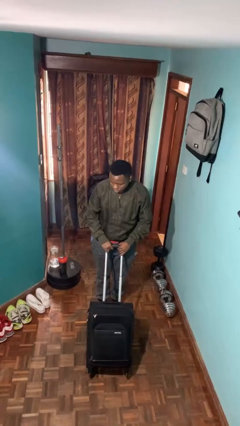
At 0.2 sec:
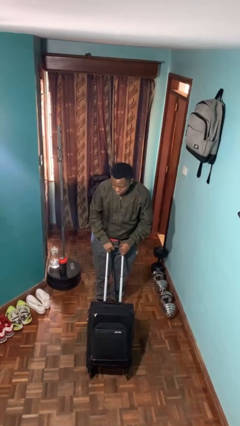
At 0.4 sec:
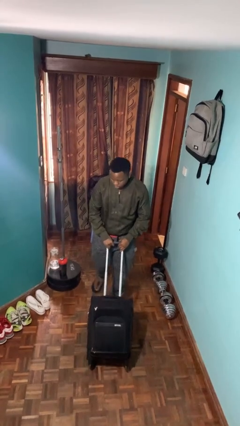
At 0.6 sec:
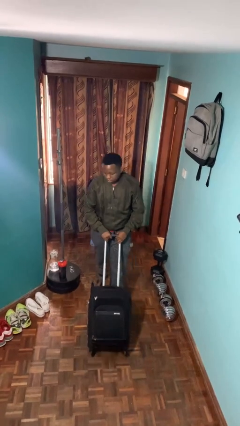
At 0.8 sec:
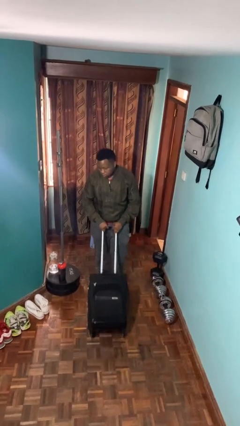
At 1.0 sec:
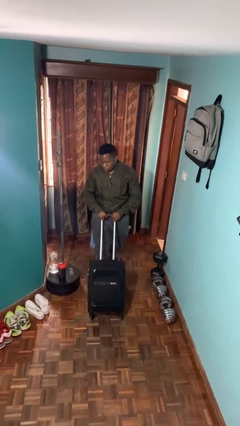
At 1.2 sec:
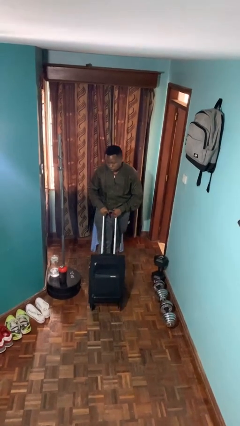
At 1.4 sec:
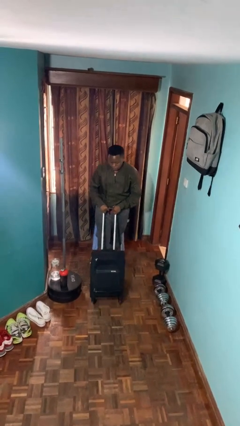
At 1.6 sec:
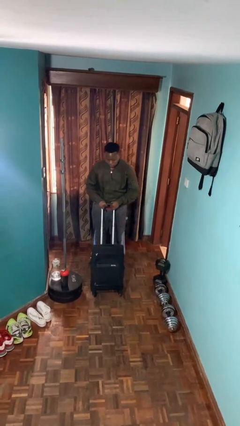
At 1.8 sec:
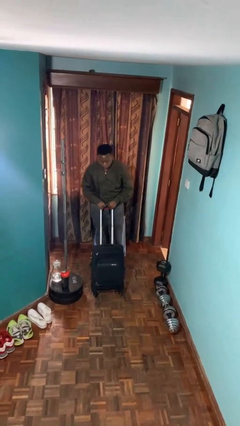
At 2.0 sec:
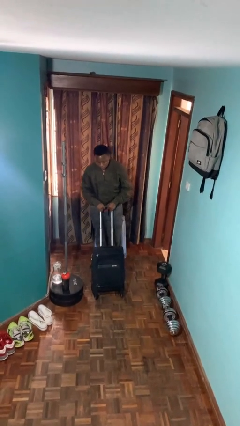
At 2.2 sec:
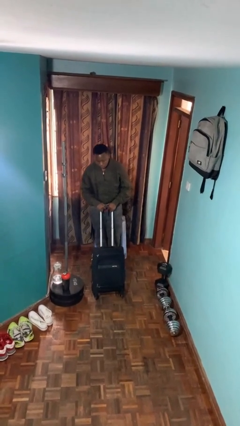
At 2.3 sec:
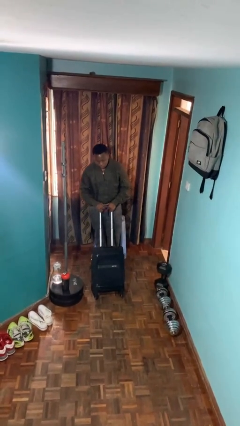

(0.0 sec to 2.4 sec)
person pulls wheeled cart

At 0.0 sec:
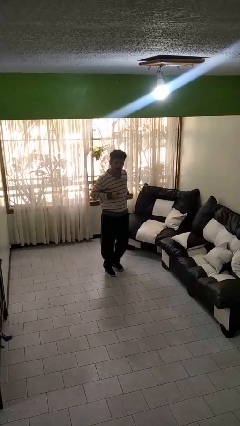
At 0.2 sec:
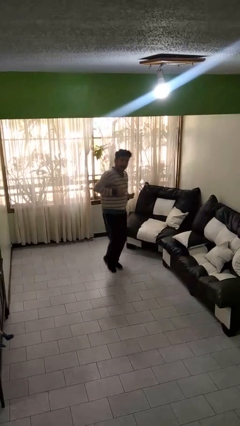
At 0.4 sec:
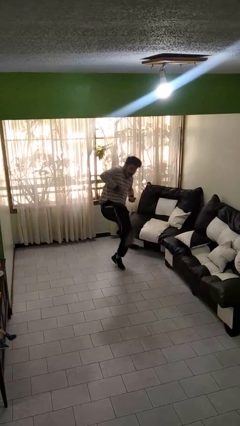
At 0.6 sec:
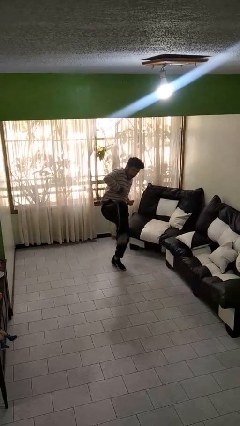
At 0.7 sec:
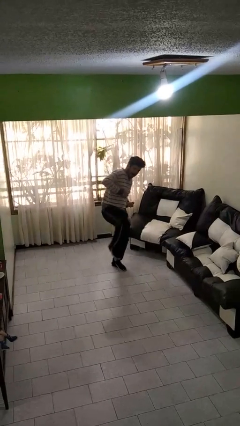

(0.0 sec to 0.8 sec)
person karate kicks

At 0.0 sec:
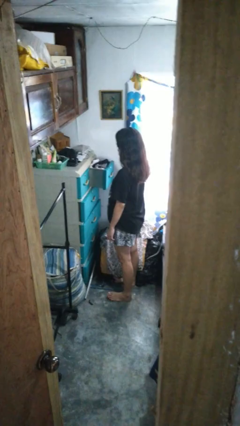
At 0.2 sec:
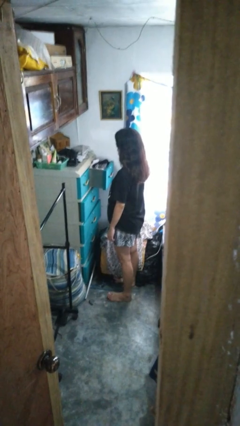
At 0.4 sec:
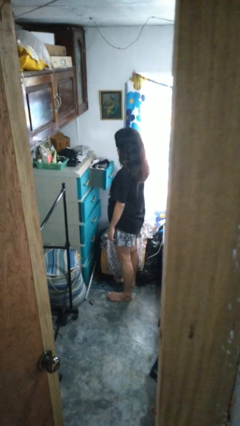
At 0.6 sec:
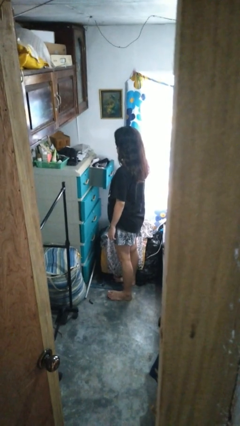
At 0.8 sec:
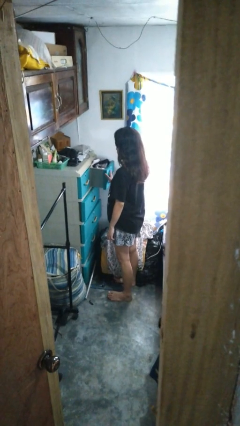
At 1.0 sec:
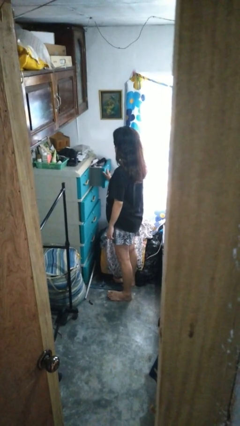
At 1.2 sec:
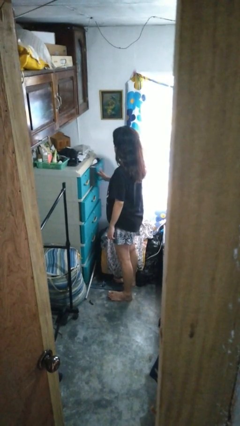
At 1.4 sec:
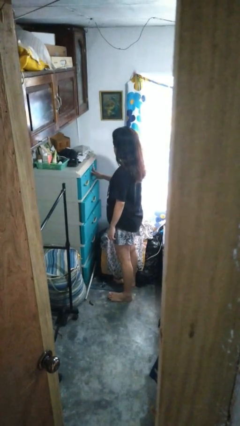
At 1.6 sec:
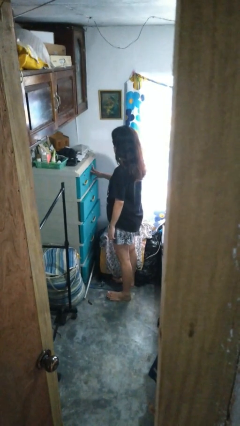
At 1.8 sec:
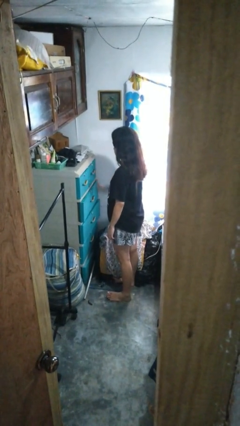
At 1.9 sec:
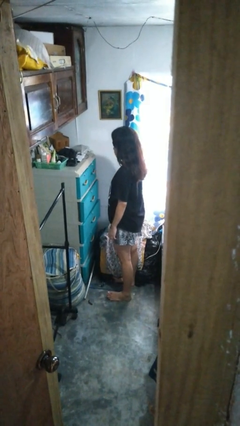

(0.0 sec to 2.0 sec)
person closes dresser drawer

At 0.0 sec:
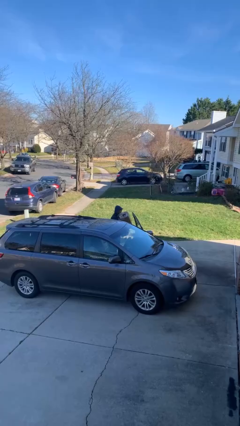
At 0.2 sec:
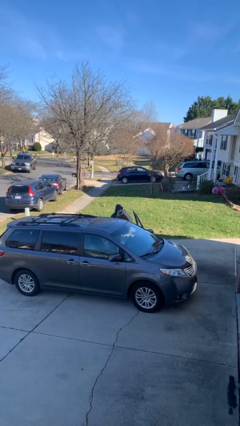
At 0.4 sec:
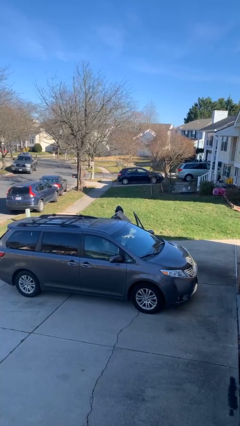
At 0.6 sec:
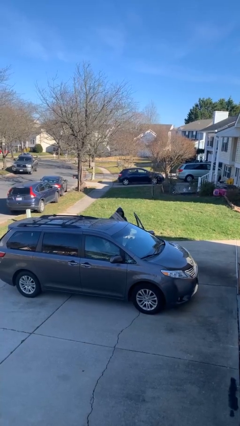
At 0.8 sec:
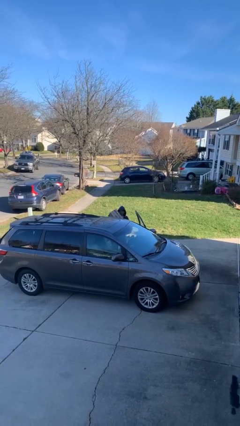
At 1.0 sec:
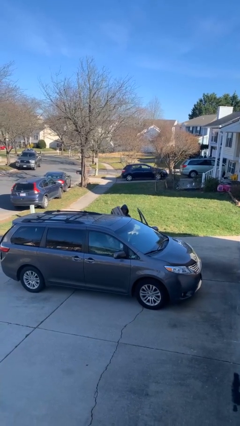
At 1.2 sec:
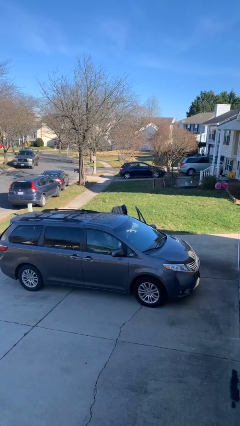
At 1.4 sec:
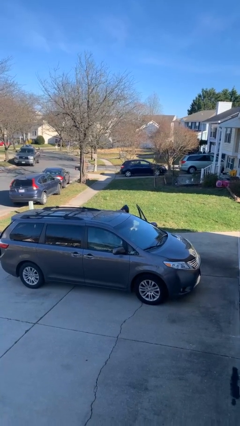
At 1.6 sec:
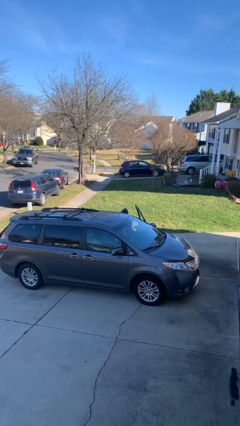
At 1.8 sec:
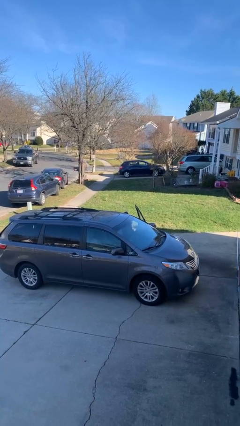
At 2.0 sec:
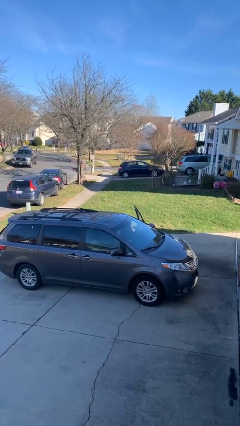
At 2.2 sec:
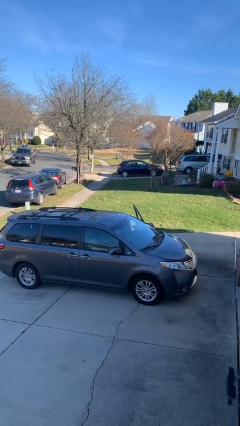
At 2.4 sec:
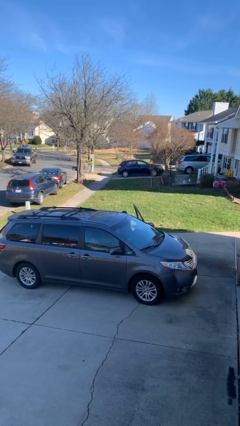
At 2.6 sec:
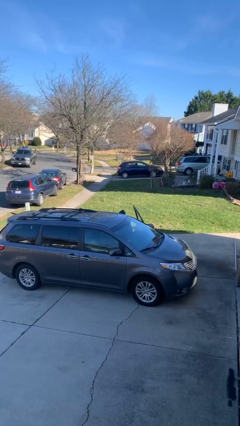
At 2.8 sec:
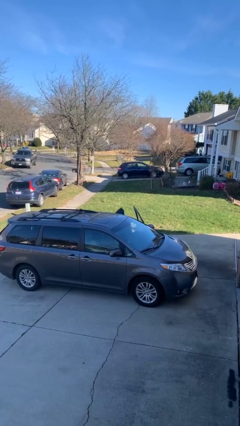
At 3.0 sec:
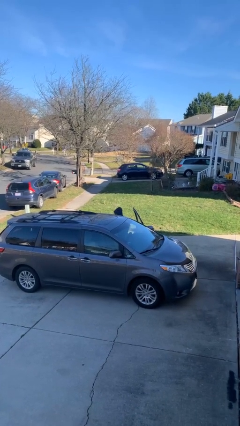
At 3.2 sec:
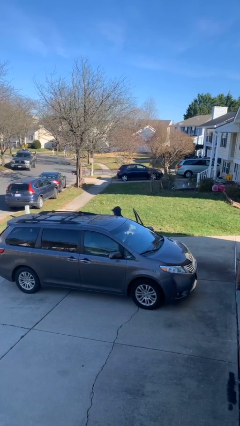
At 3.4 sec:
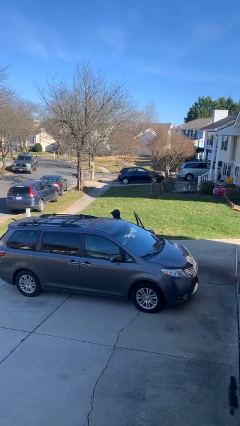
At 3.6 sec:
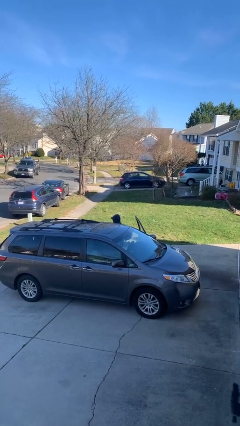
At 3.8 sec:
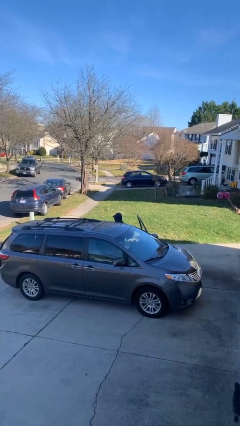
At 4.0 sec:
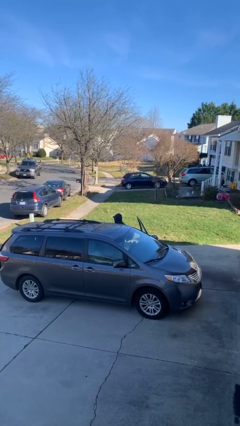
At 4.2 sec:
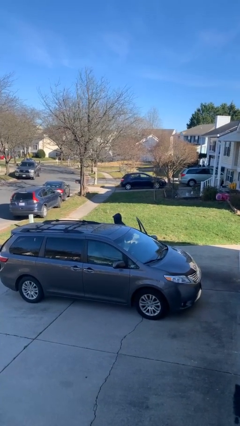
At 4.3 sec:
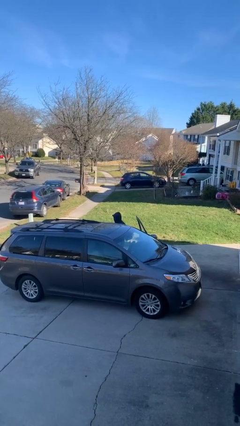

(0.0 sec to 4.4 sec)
person loads car

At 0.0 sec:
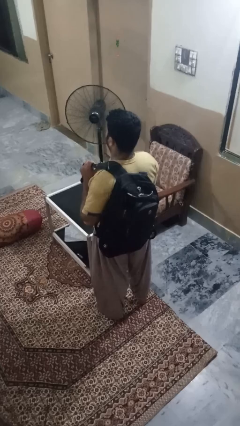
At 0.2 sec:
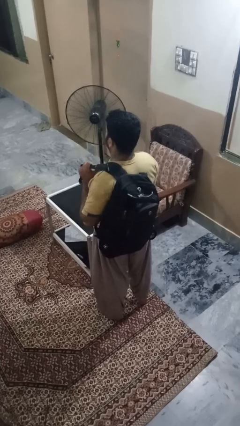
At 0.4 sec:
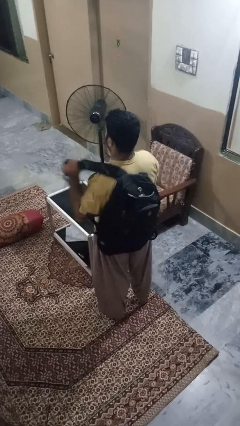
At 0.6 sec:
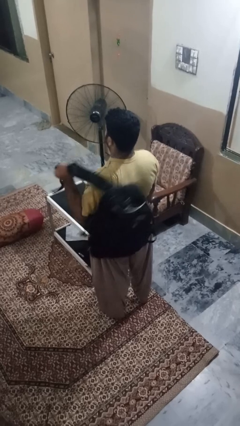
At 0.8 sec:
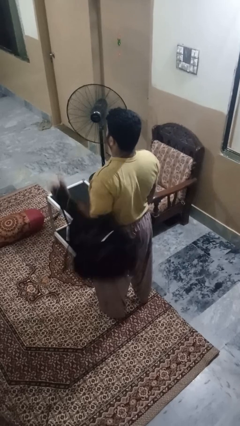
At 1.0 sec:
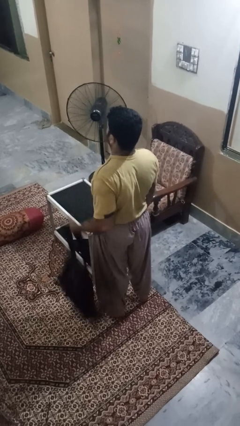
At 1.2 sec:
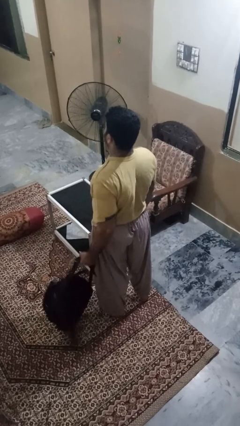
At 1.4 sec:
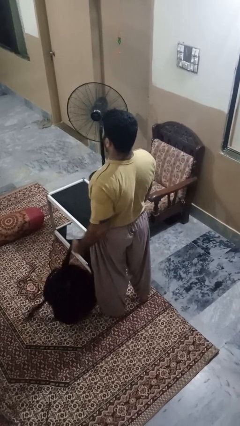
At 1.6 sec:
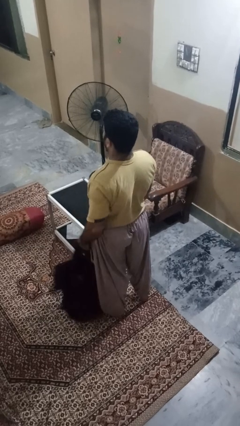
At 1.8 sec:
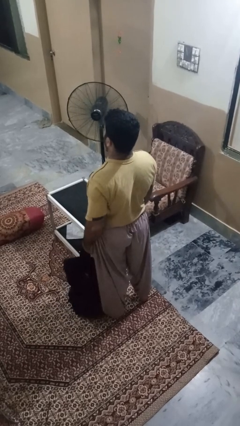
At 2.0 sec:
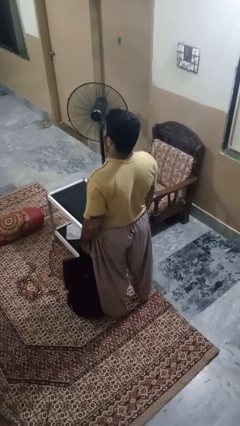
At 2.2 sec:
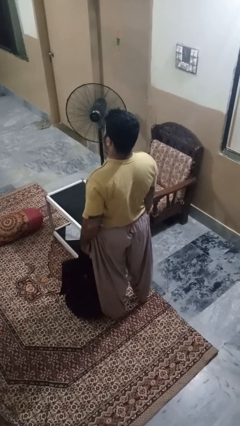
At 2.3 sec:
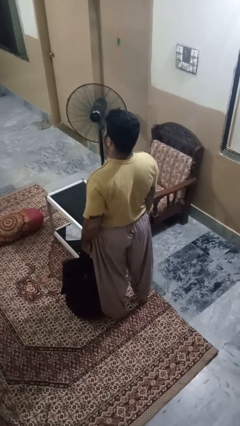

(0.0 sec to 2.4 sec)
person takes off backpack

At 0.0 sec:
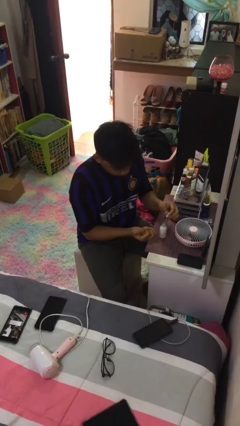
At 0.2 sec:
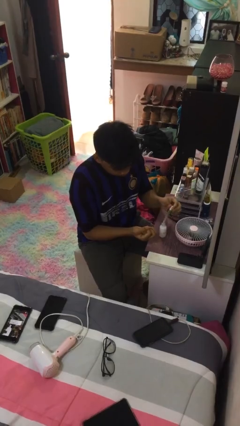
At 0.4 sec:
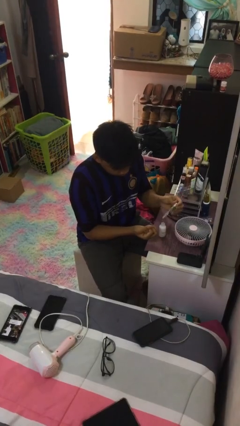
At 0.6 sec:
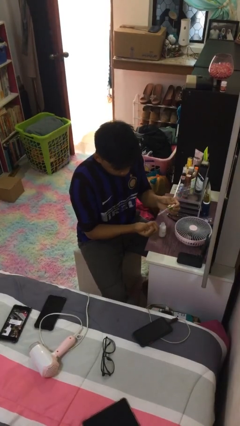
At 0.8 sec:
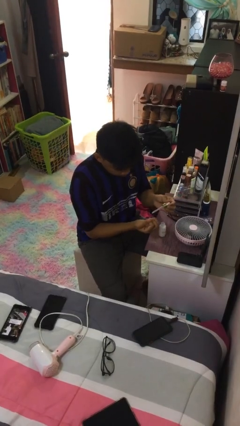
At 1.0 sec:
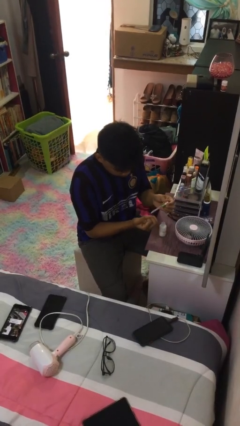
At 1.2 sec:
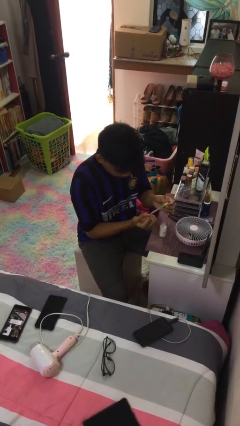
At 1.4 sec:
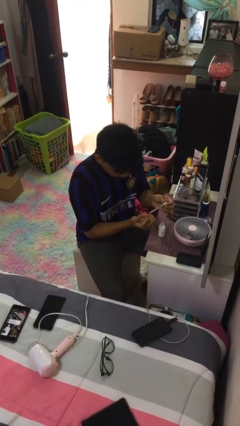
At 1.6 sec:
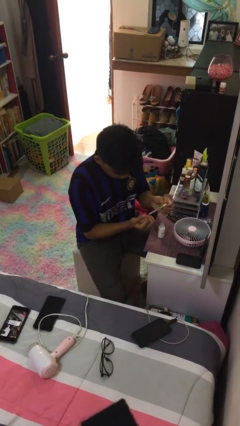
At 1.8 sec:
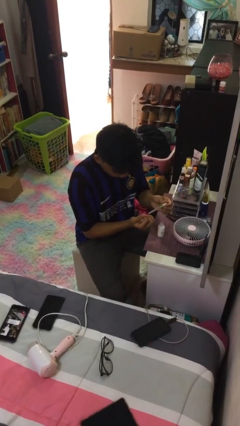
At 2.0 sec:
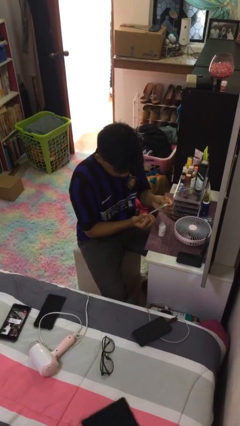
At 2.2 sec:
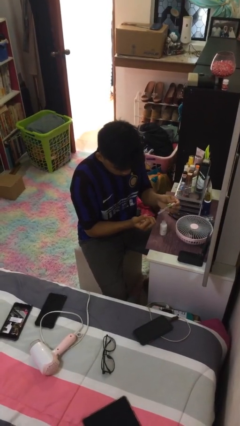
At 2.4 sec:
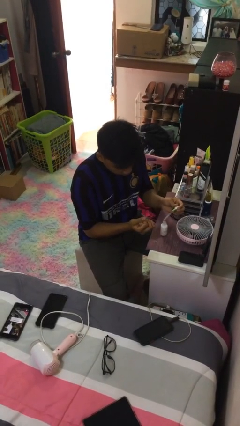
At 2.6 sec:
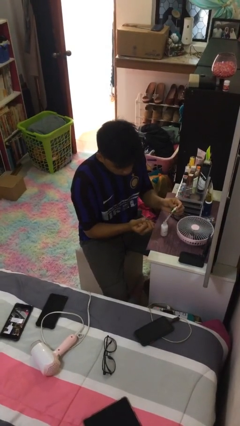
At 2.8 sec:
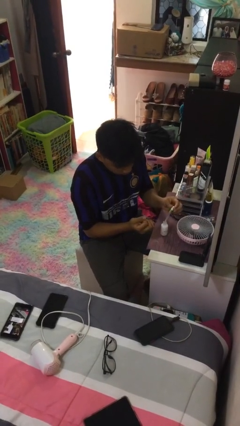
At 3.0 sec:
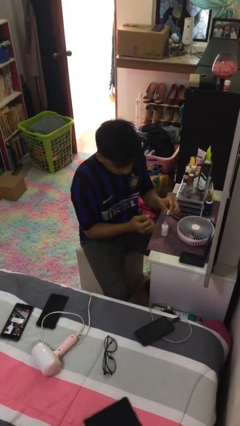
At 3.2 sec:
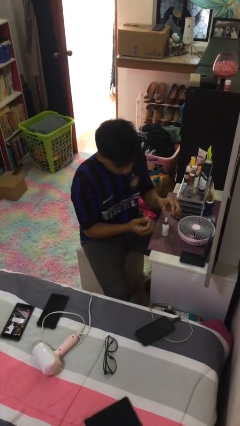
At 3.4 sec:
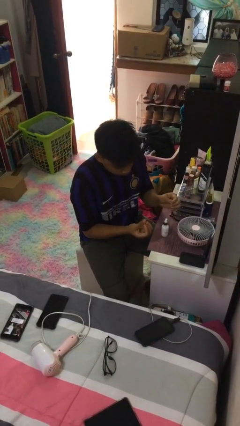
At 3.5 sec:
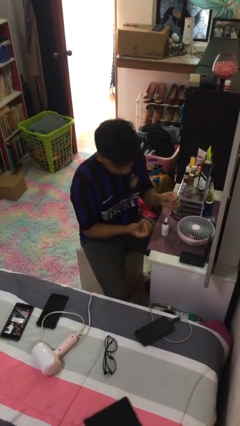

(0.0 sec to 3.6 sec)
person paints fingernails

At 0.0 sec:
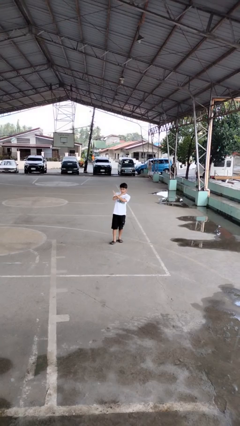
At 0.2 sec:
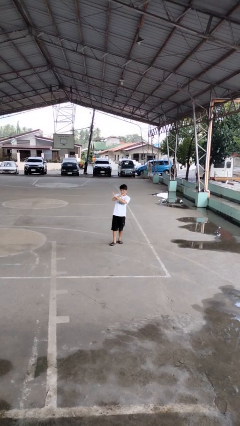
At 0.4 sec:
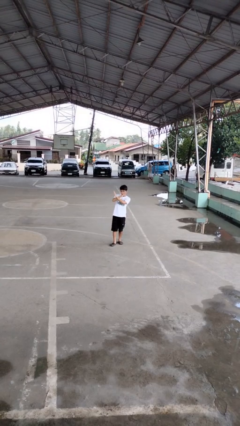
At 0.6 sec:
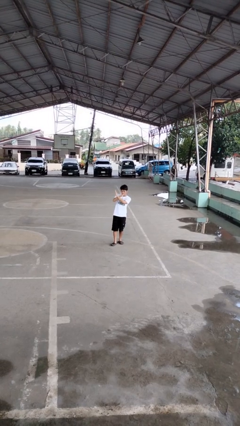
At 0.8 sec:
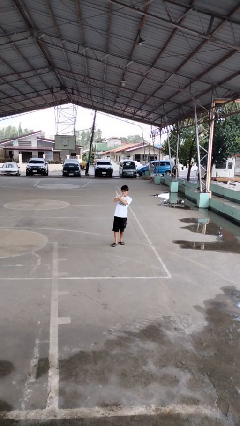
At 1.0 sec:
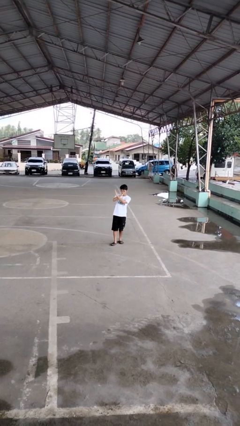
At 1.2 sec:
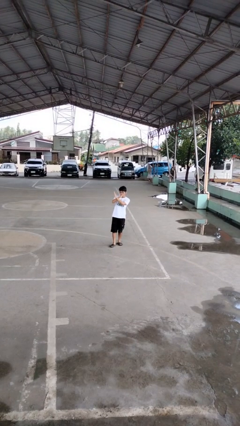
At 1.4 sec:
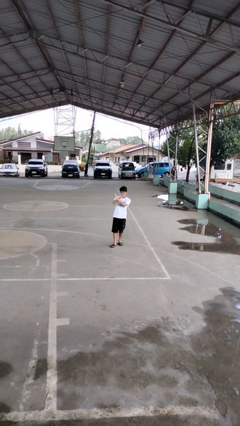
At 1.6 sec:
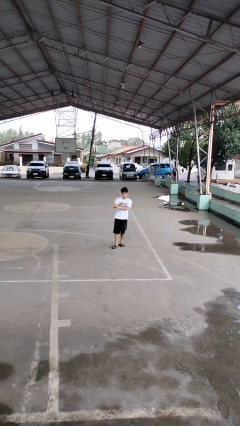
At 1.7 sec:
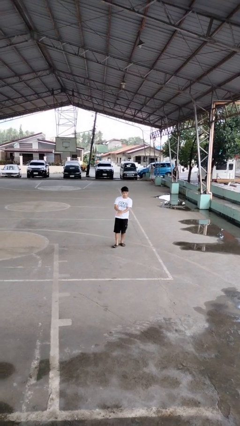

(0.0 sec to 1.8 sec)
person gestures arms x
